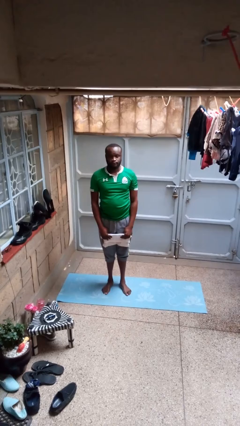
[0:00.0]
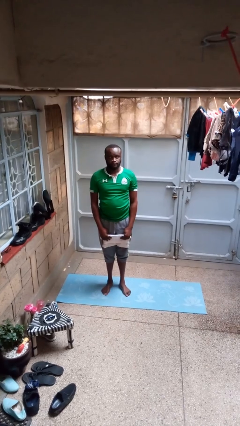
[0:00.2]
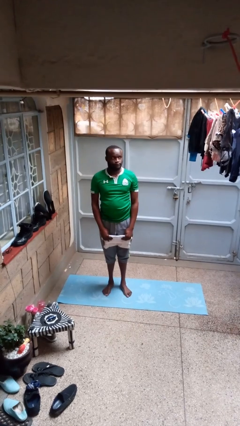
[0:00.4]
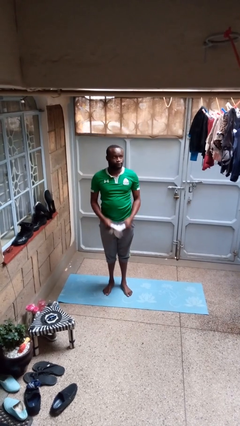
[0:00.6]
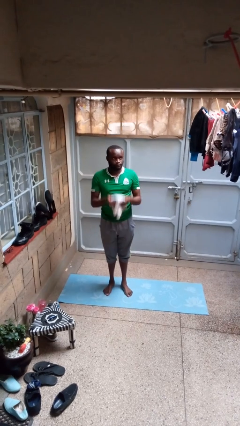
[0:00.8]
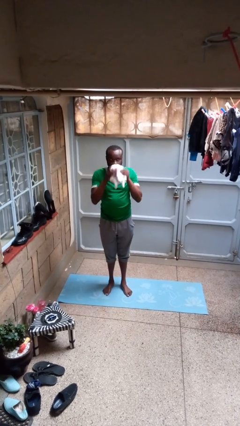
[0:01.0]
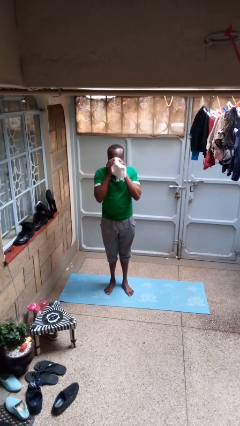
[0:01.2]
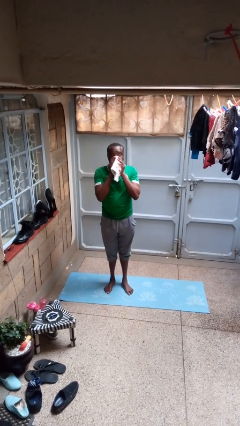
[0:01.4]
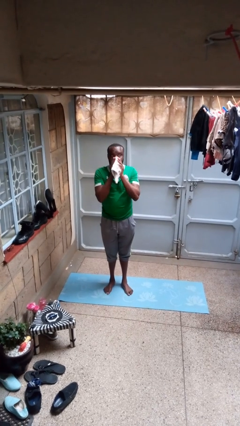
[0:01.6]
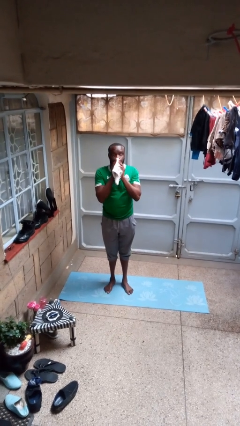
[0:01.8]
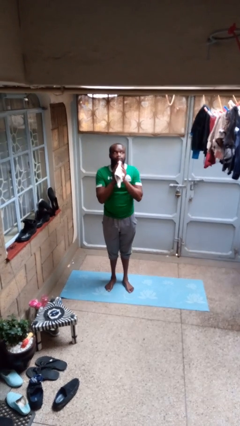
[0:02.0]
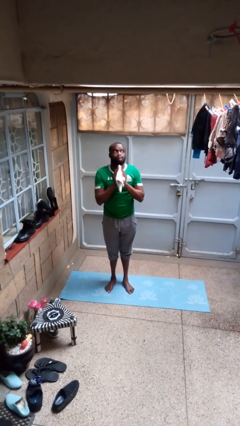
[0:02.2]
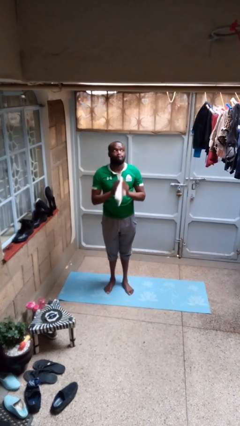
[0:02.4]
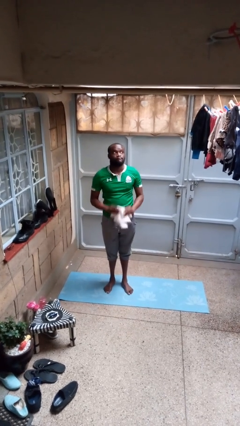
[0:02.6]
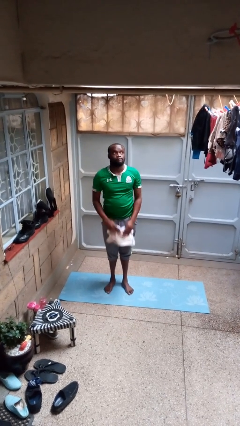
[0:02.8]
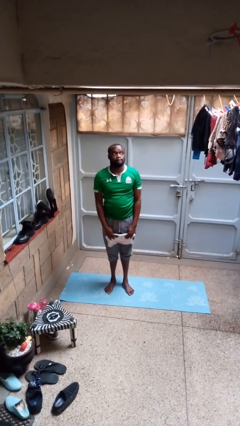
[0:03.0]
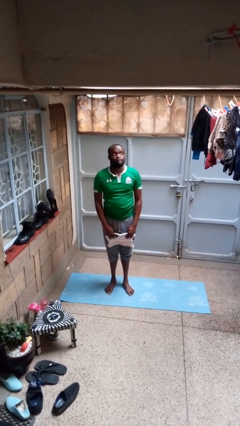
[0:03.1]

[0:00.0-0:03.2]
person wipes mouth with napkin

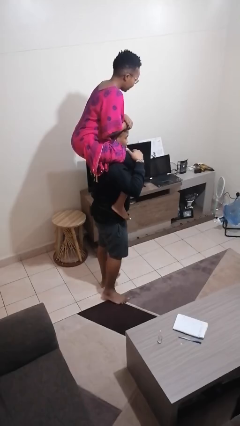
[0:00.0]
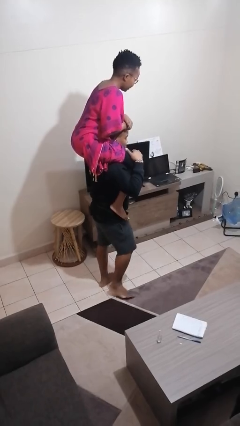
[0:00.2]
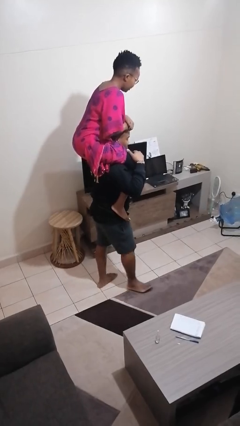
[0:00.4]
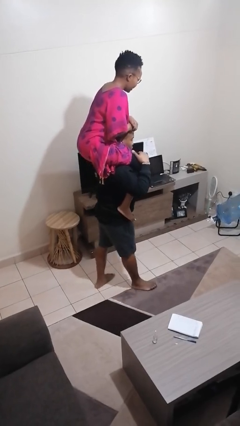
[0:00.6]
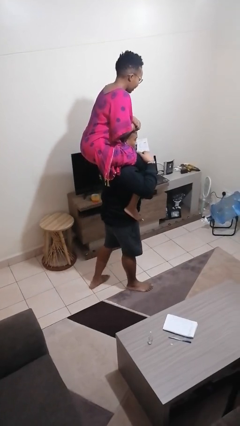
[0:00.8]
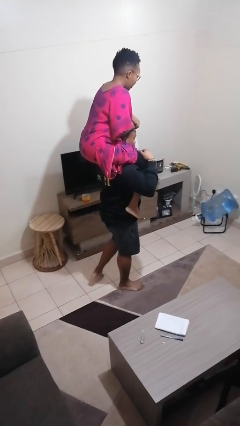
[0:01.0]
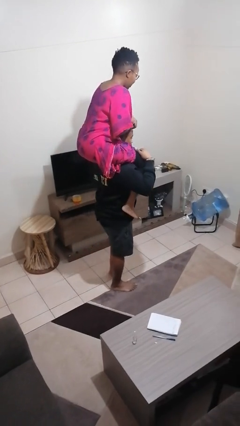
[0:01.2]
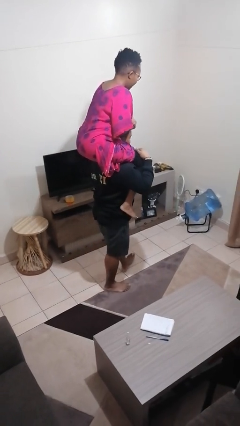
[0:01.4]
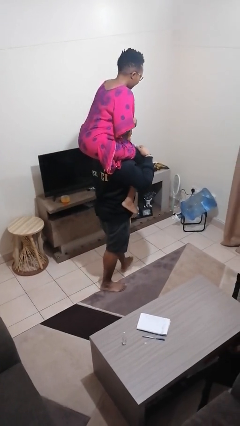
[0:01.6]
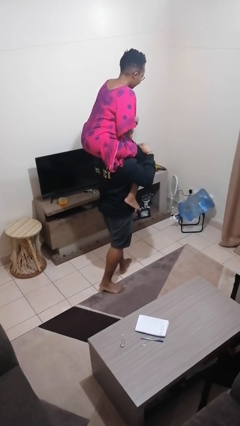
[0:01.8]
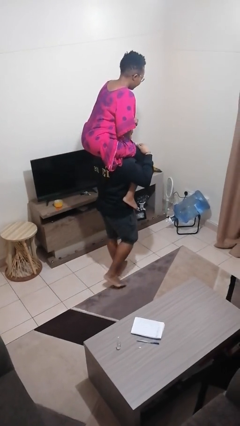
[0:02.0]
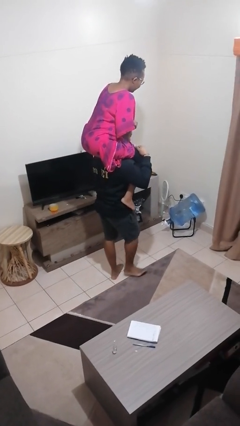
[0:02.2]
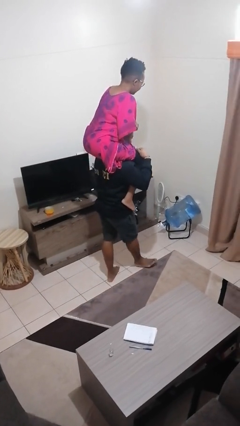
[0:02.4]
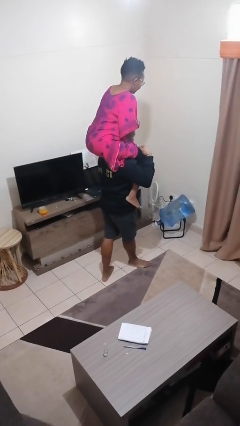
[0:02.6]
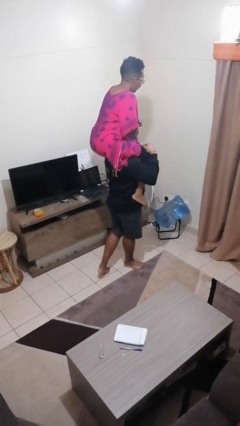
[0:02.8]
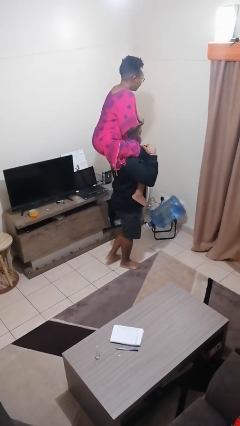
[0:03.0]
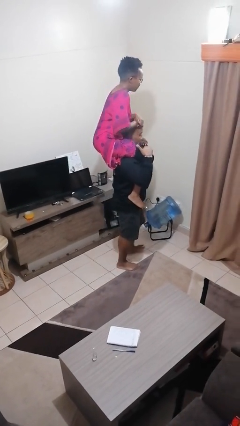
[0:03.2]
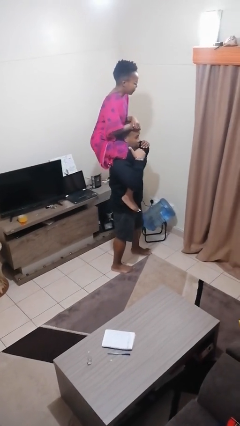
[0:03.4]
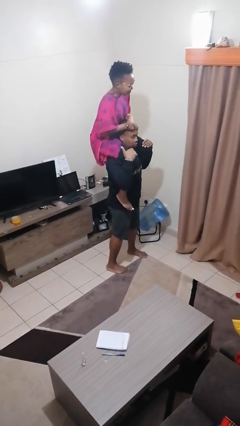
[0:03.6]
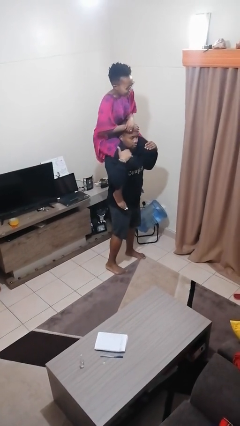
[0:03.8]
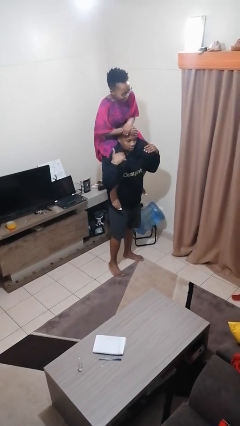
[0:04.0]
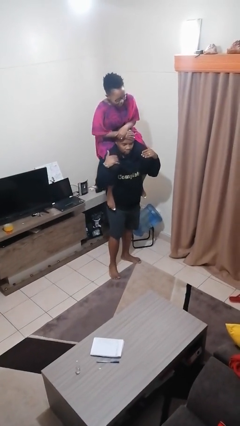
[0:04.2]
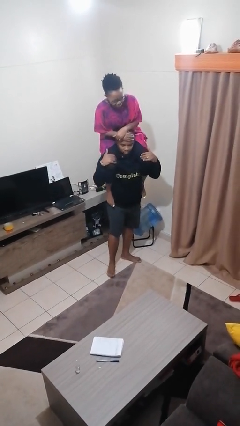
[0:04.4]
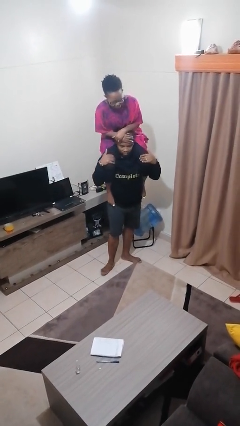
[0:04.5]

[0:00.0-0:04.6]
person carries person on shoulders

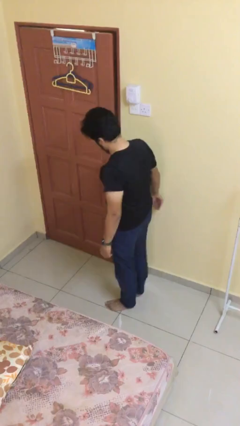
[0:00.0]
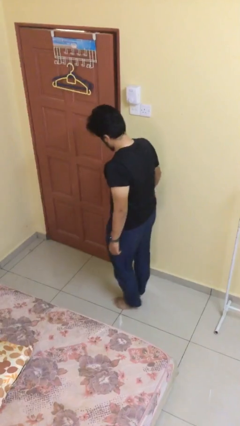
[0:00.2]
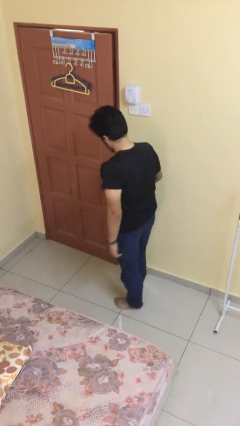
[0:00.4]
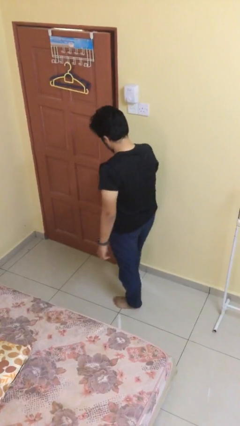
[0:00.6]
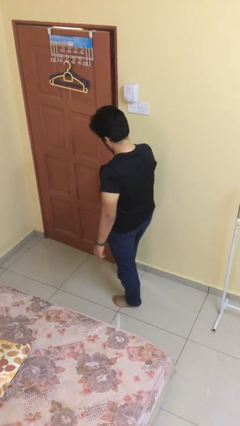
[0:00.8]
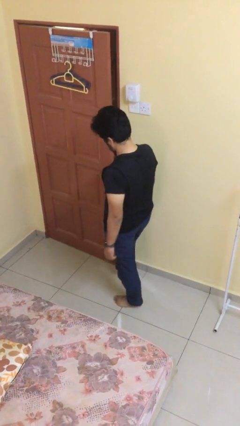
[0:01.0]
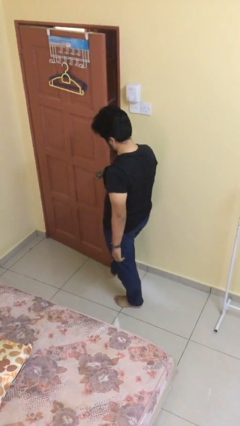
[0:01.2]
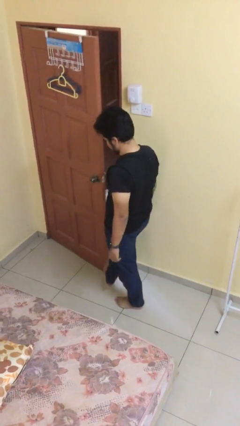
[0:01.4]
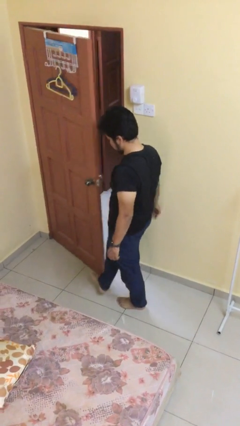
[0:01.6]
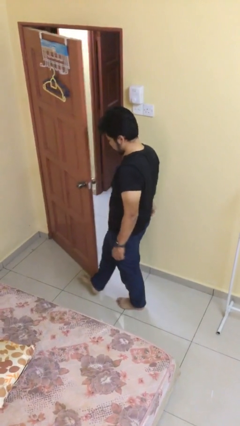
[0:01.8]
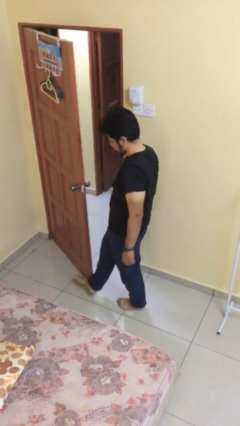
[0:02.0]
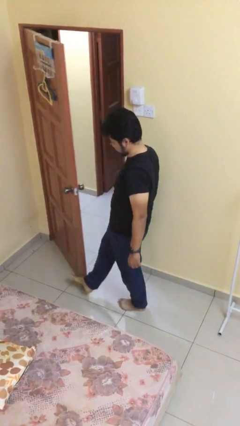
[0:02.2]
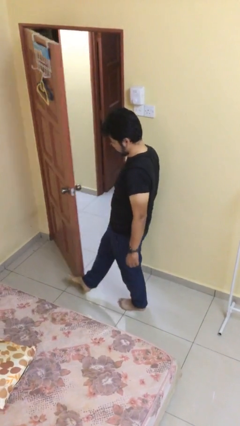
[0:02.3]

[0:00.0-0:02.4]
person opens facility door

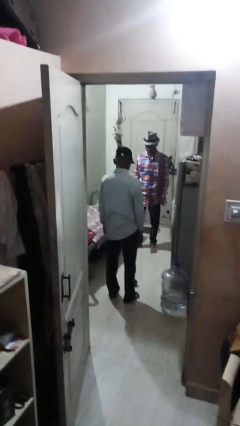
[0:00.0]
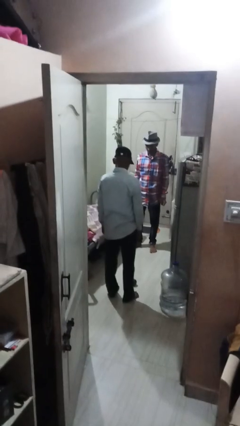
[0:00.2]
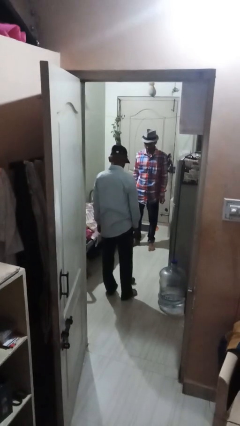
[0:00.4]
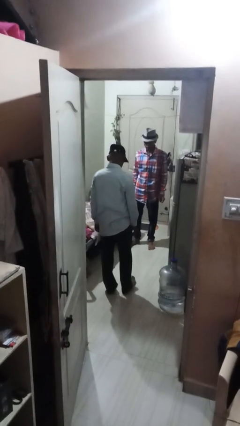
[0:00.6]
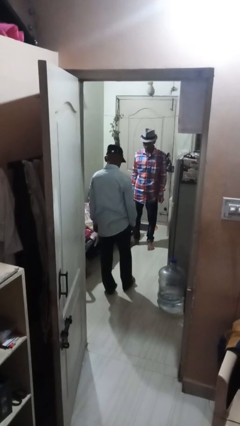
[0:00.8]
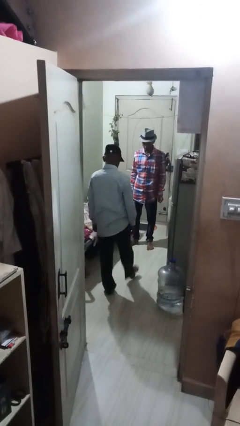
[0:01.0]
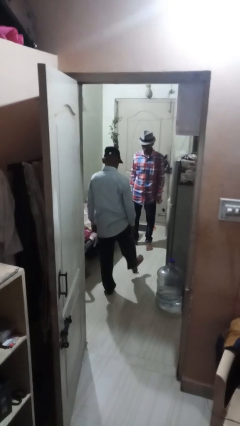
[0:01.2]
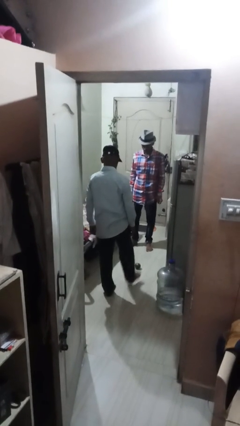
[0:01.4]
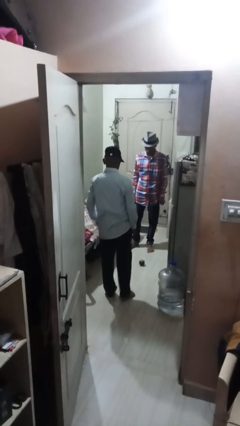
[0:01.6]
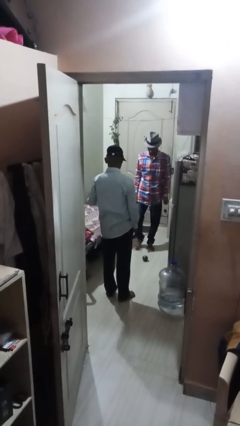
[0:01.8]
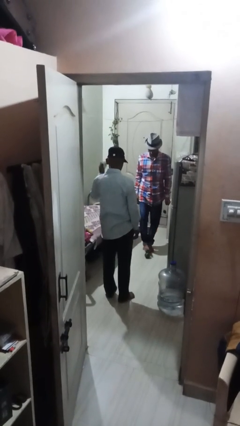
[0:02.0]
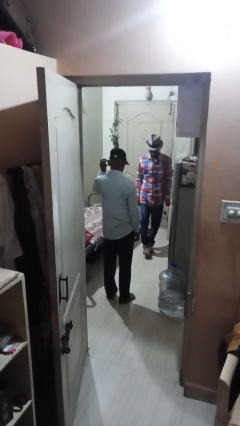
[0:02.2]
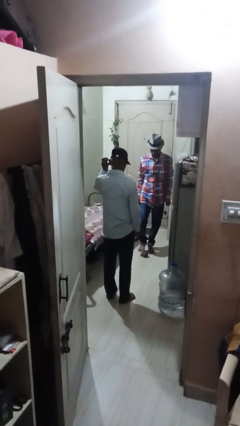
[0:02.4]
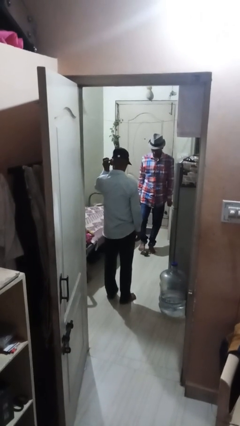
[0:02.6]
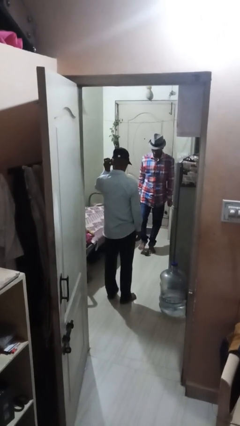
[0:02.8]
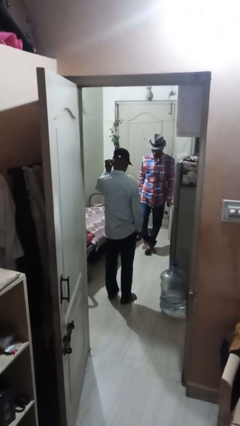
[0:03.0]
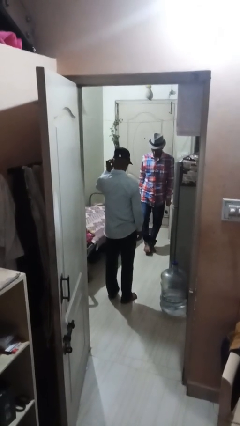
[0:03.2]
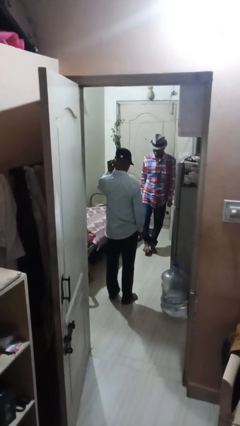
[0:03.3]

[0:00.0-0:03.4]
person kicks object to person

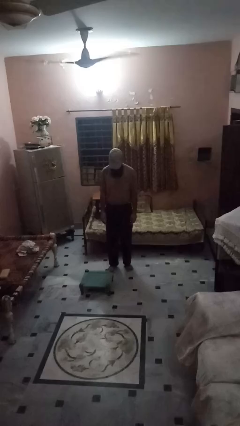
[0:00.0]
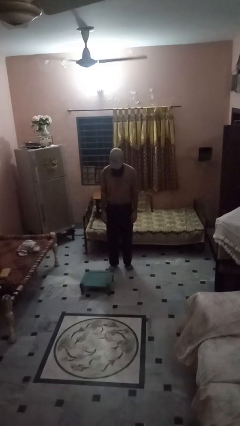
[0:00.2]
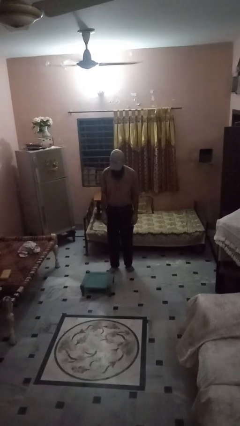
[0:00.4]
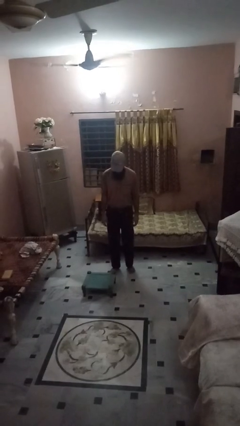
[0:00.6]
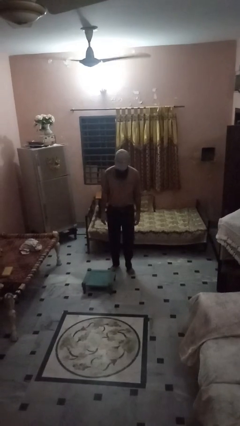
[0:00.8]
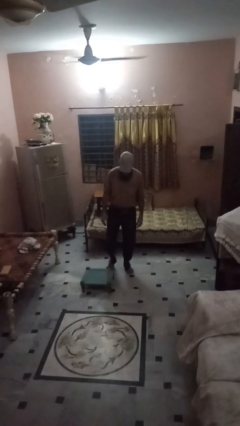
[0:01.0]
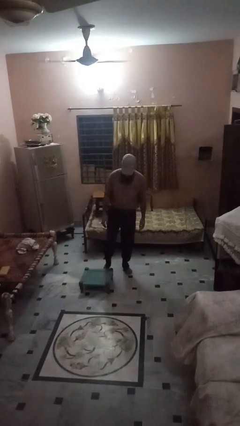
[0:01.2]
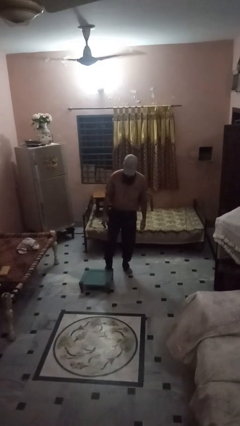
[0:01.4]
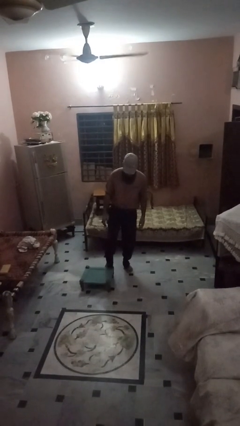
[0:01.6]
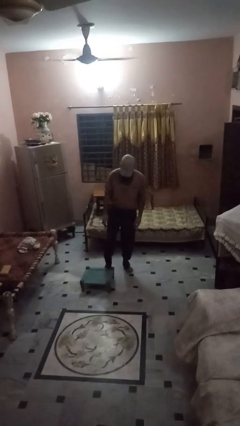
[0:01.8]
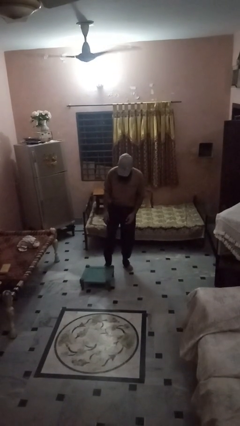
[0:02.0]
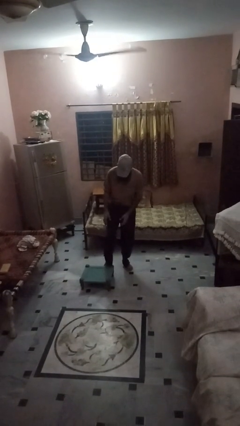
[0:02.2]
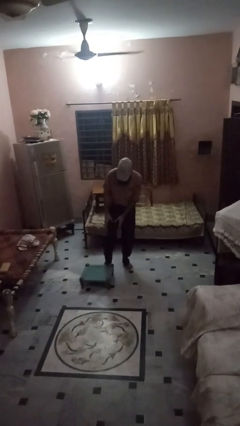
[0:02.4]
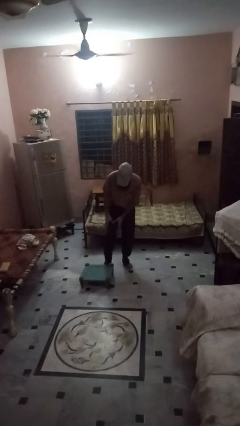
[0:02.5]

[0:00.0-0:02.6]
person trips on object on floor

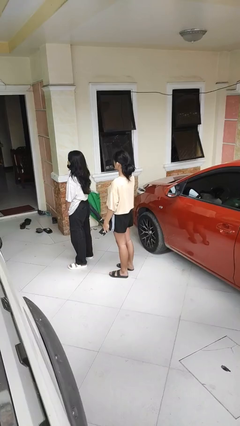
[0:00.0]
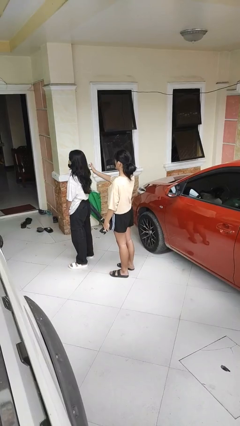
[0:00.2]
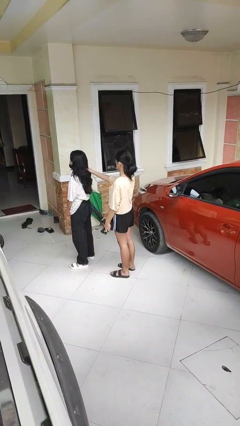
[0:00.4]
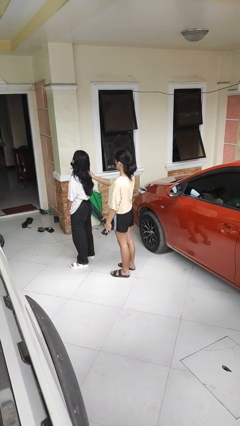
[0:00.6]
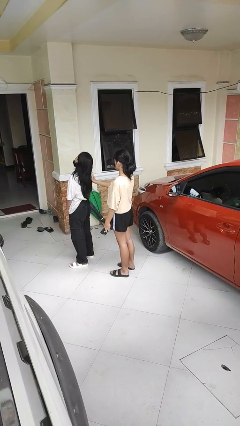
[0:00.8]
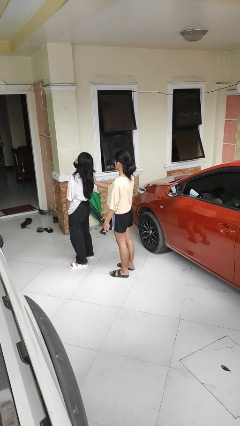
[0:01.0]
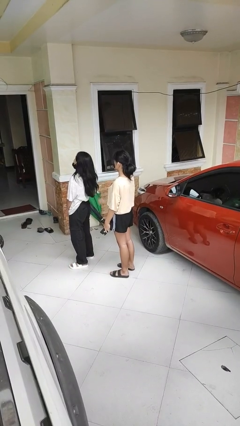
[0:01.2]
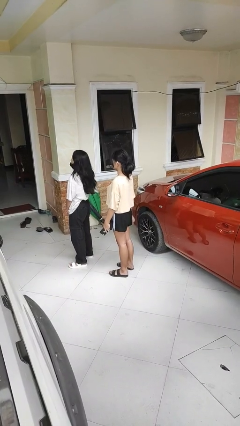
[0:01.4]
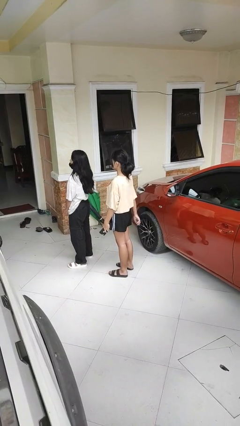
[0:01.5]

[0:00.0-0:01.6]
person grabs person by hair
